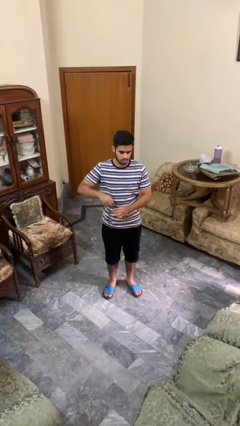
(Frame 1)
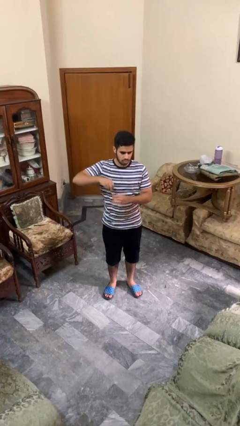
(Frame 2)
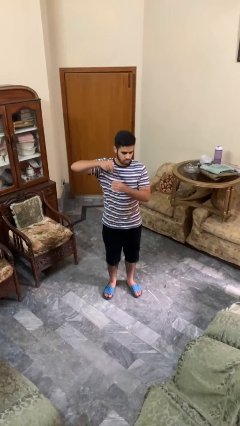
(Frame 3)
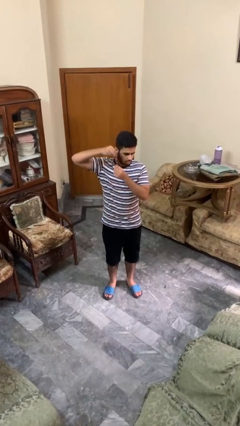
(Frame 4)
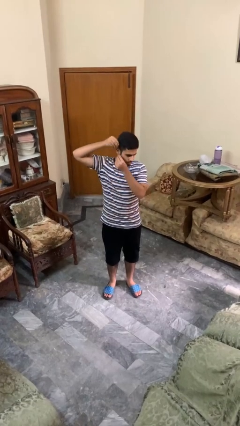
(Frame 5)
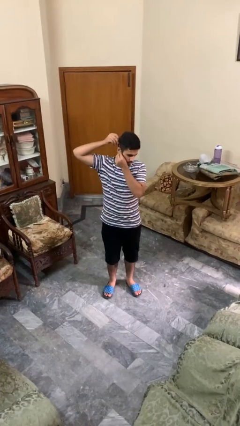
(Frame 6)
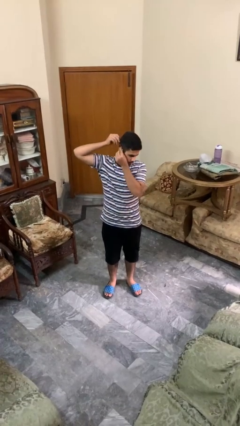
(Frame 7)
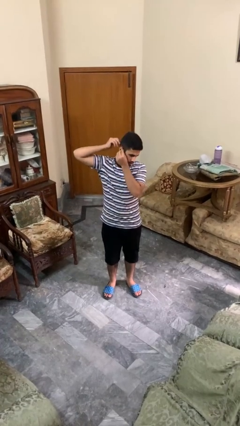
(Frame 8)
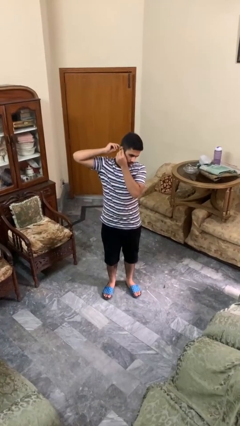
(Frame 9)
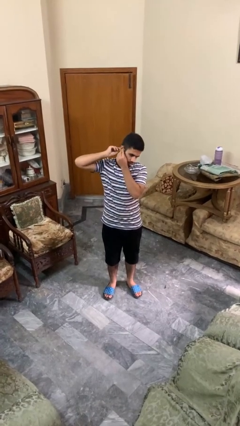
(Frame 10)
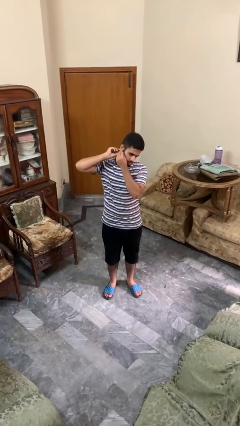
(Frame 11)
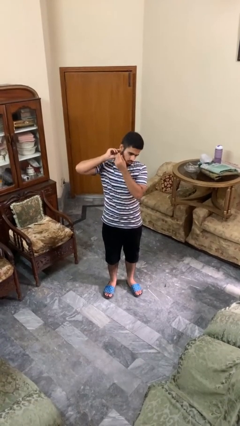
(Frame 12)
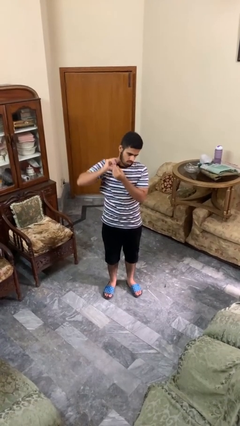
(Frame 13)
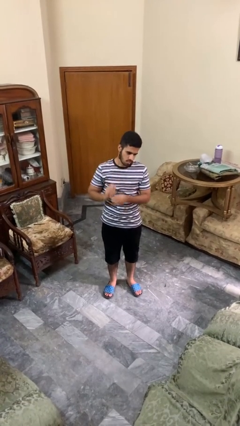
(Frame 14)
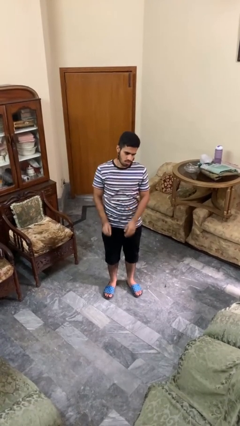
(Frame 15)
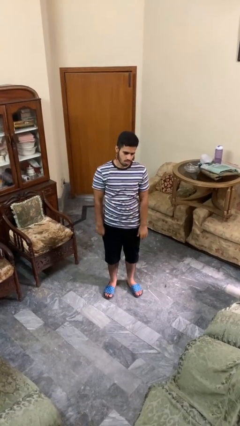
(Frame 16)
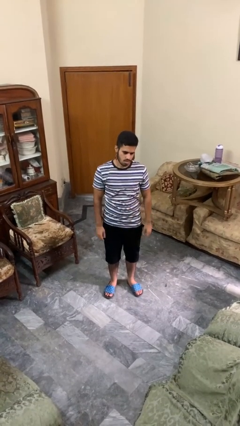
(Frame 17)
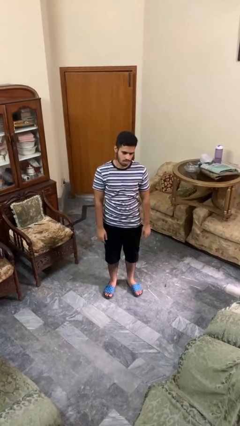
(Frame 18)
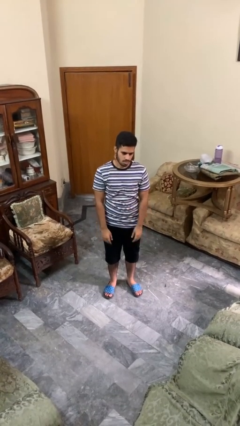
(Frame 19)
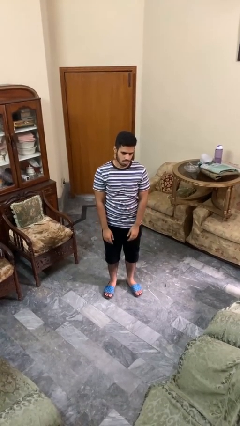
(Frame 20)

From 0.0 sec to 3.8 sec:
person puts on earrings

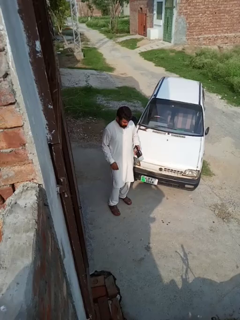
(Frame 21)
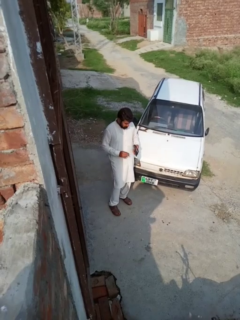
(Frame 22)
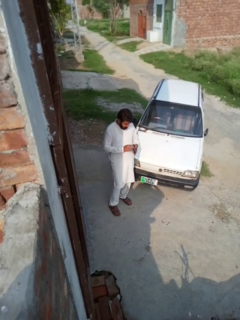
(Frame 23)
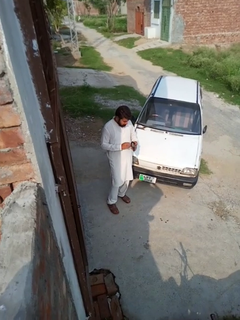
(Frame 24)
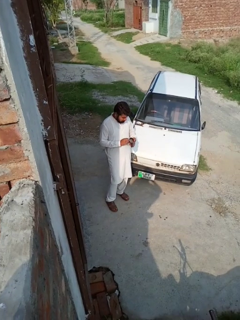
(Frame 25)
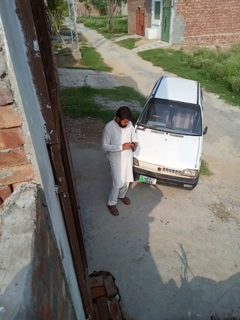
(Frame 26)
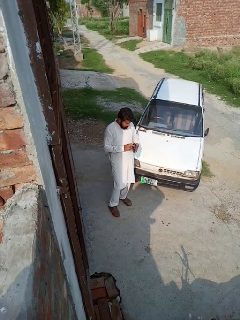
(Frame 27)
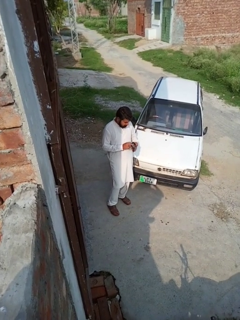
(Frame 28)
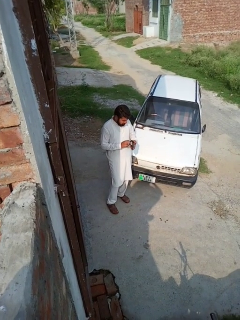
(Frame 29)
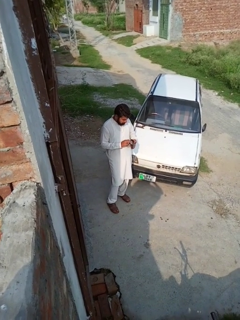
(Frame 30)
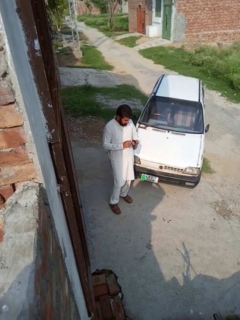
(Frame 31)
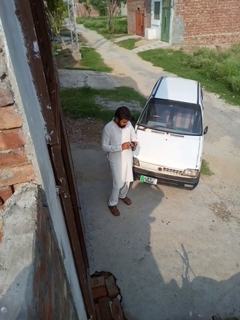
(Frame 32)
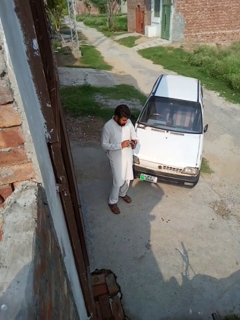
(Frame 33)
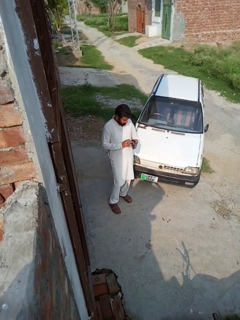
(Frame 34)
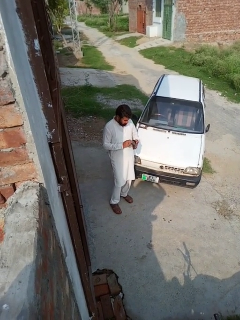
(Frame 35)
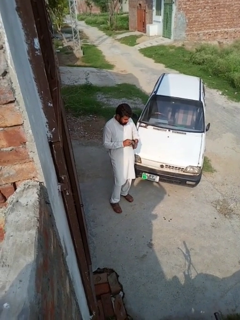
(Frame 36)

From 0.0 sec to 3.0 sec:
person searches in purse

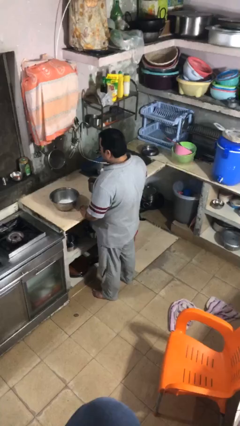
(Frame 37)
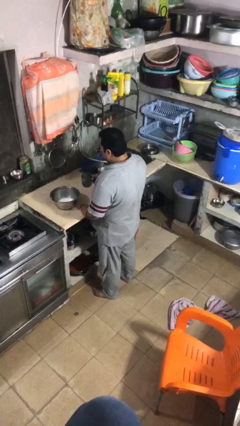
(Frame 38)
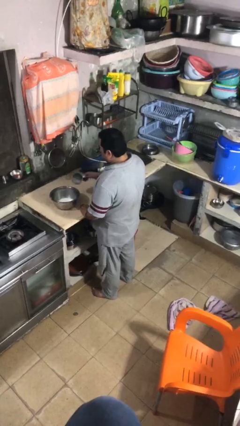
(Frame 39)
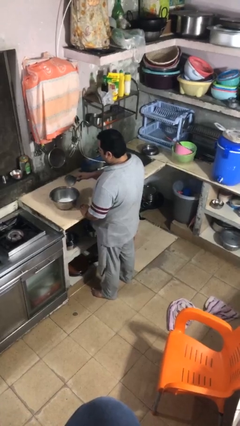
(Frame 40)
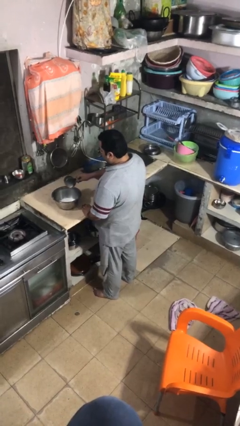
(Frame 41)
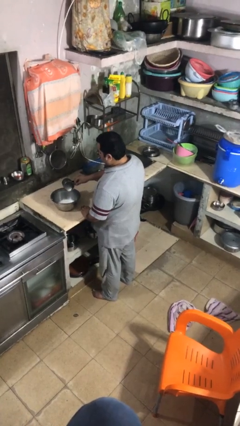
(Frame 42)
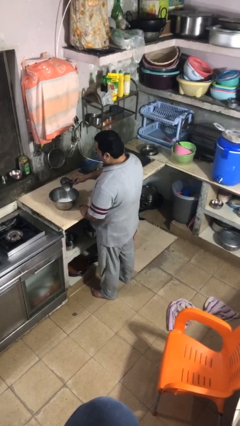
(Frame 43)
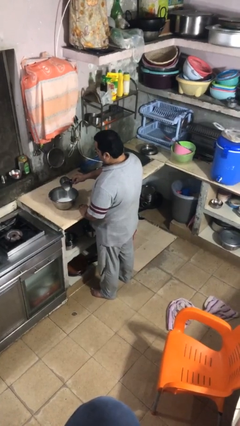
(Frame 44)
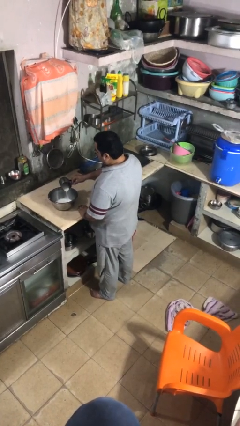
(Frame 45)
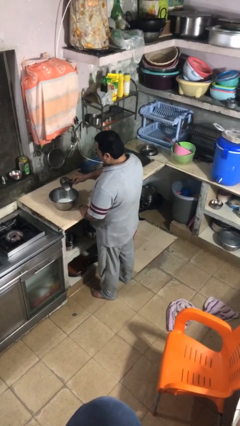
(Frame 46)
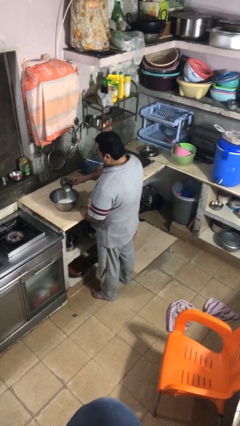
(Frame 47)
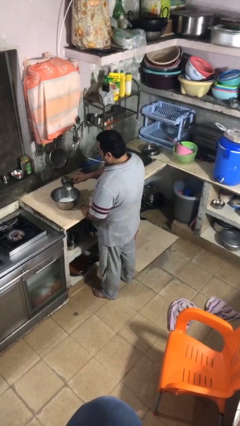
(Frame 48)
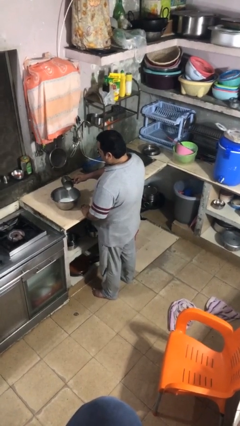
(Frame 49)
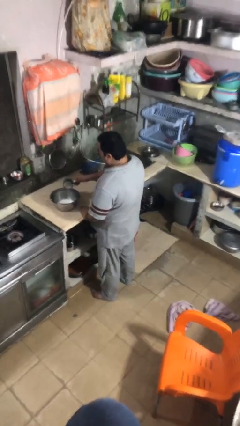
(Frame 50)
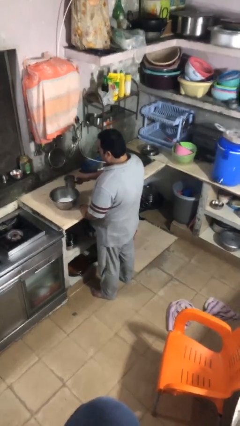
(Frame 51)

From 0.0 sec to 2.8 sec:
person pours into bowl

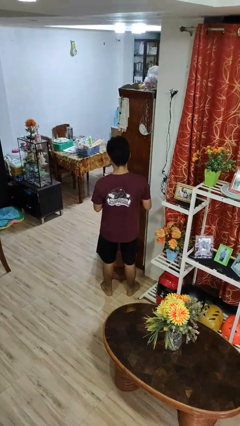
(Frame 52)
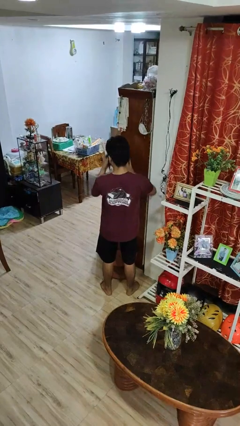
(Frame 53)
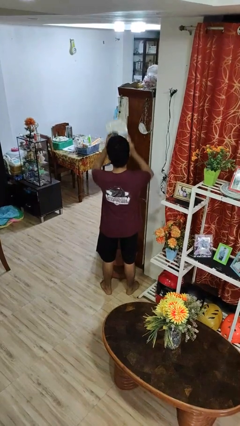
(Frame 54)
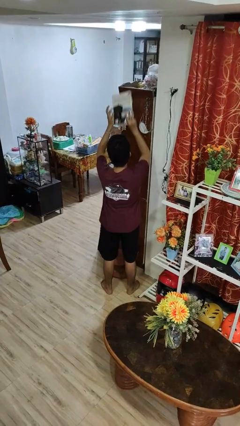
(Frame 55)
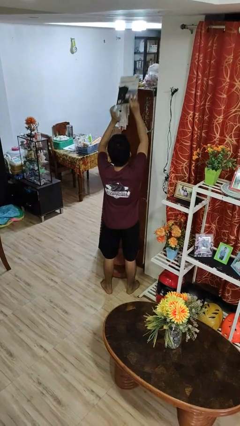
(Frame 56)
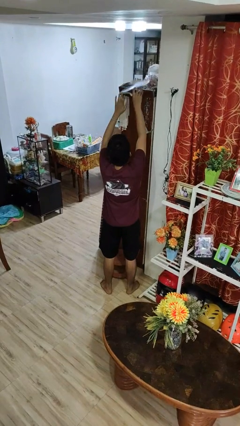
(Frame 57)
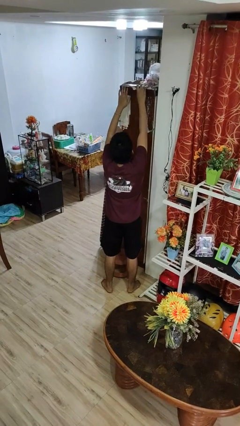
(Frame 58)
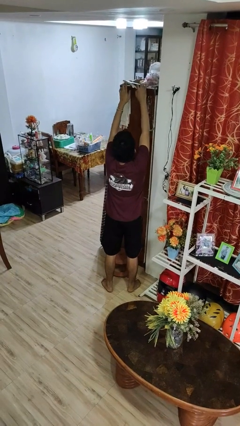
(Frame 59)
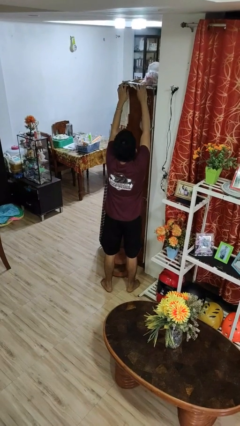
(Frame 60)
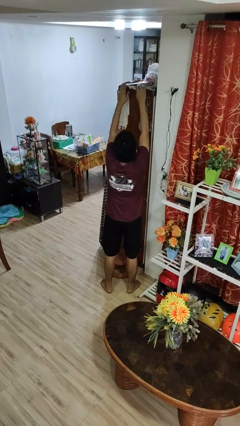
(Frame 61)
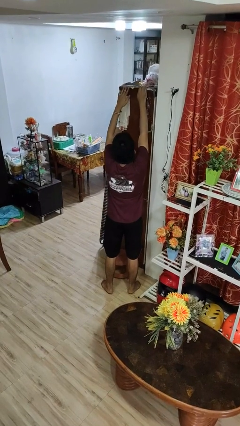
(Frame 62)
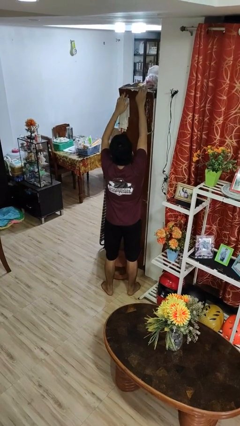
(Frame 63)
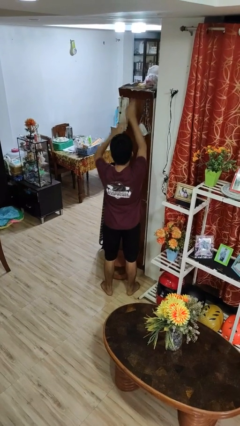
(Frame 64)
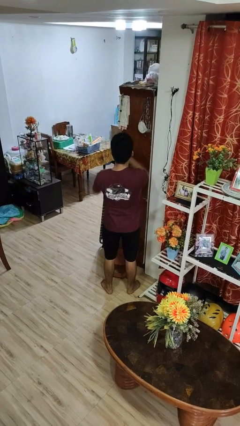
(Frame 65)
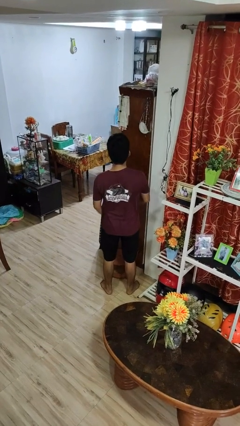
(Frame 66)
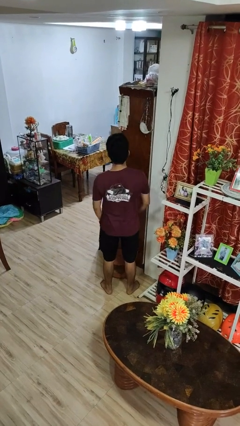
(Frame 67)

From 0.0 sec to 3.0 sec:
person puts down object on shelf

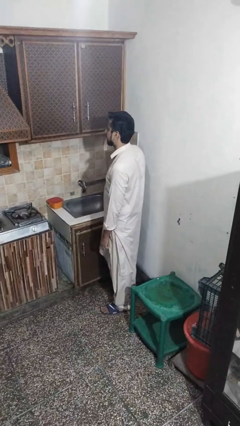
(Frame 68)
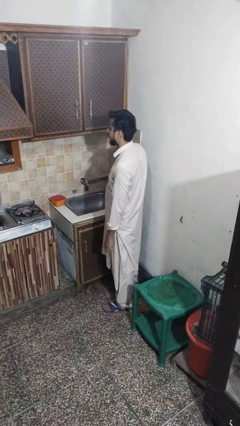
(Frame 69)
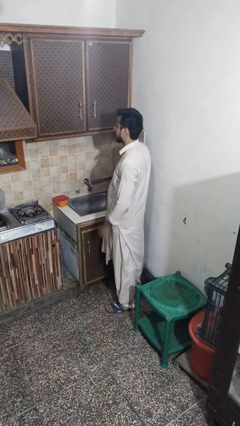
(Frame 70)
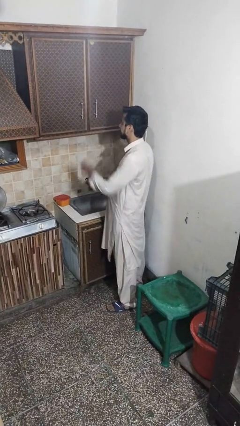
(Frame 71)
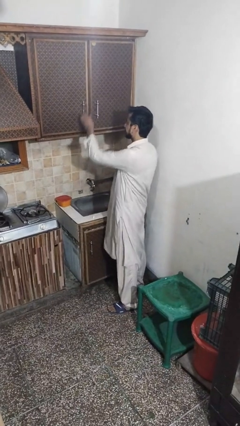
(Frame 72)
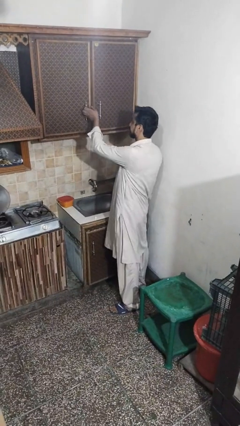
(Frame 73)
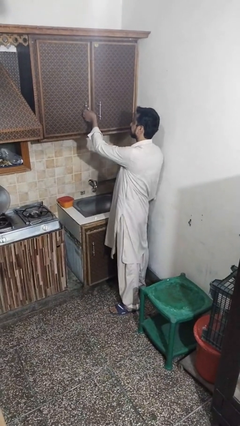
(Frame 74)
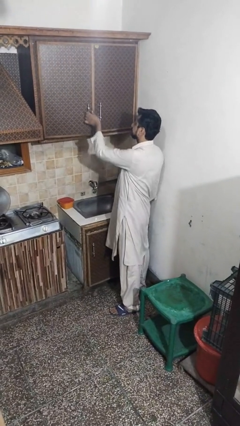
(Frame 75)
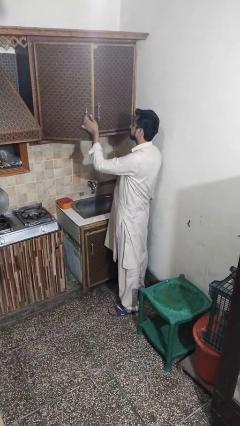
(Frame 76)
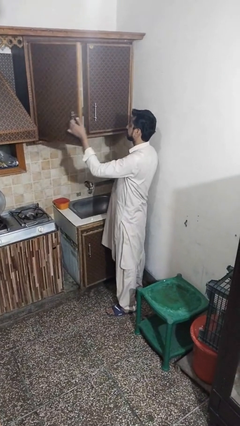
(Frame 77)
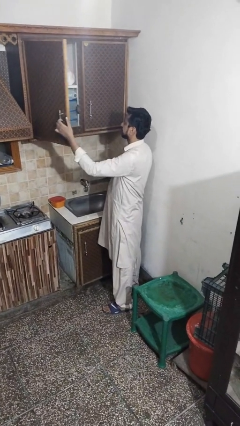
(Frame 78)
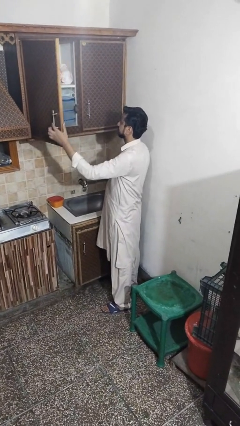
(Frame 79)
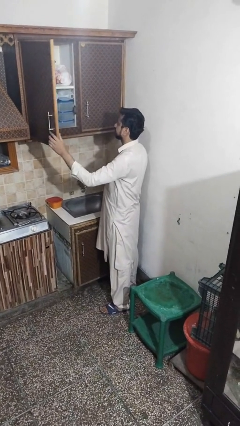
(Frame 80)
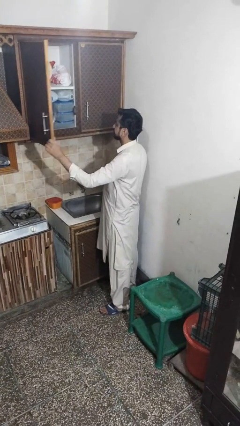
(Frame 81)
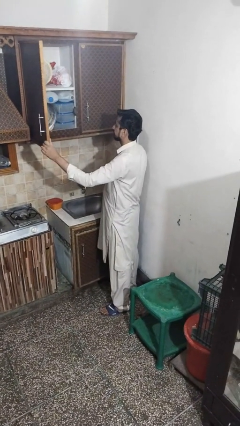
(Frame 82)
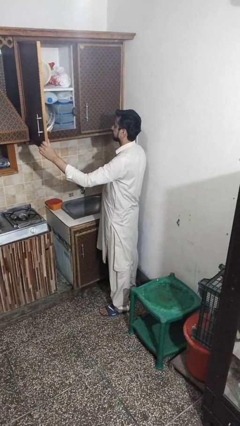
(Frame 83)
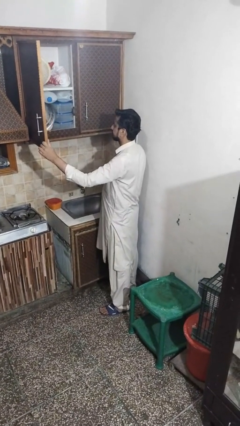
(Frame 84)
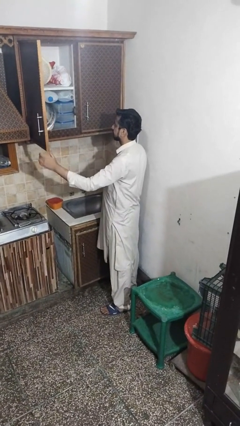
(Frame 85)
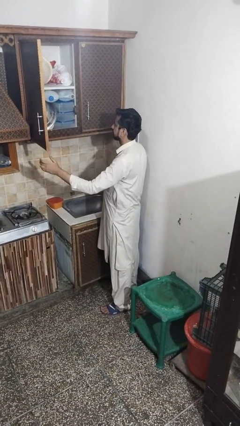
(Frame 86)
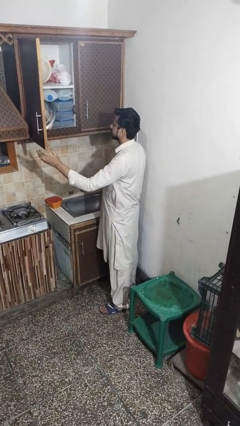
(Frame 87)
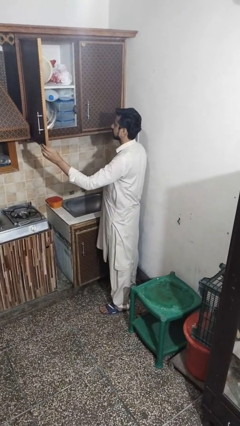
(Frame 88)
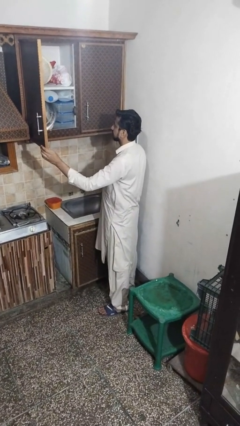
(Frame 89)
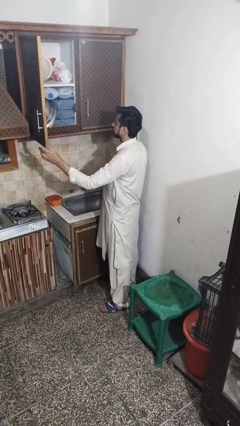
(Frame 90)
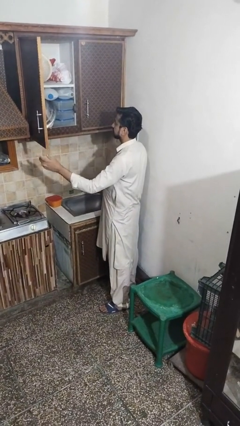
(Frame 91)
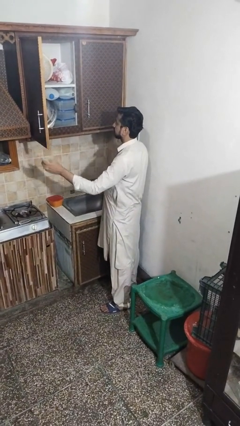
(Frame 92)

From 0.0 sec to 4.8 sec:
person opens cabinet

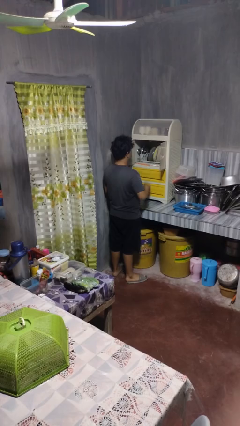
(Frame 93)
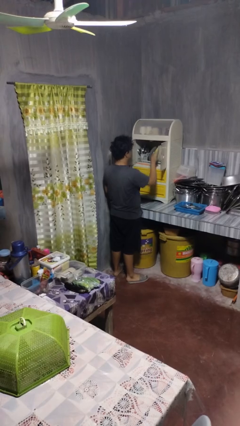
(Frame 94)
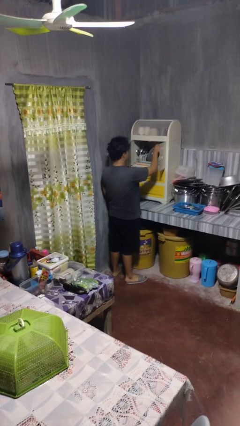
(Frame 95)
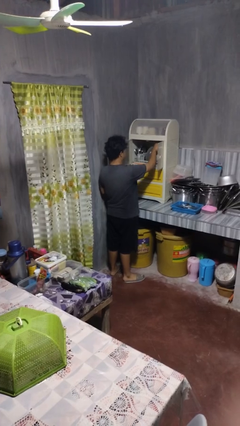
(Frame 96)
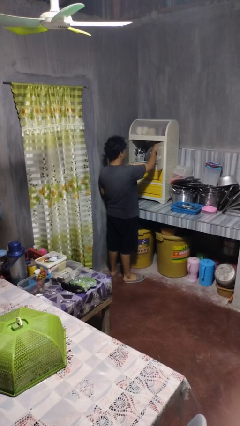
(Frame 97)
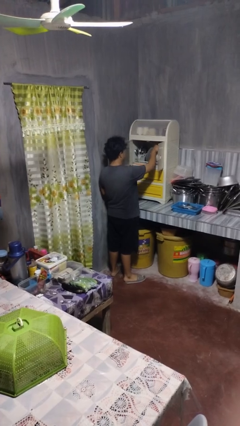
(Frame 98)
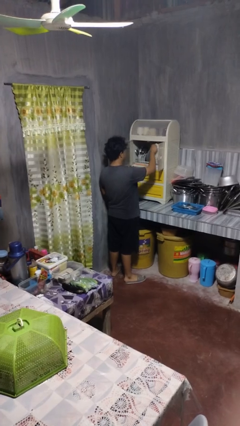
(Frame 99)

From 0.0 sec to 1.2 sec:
person picks up object from cabinet
